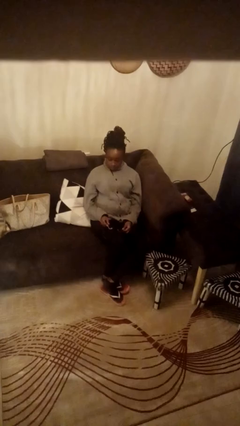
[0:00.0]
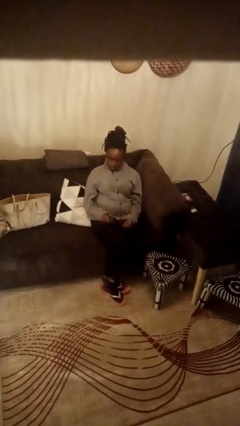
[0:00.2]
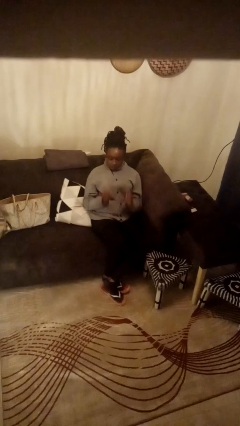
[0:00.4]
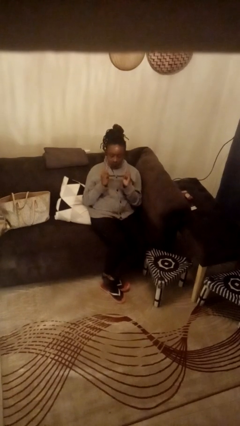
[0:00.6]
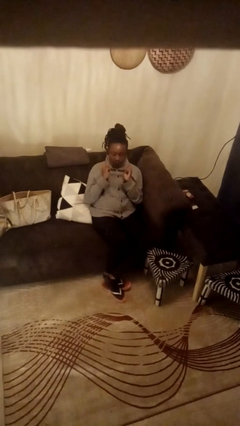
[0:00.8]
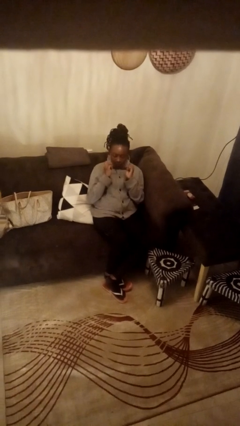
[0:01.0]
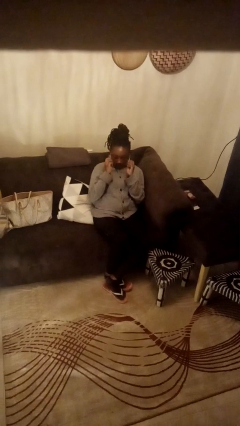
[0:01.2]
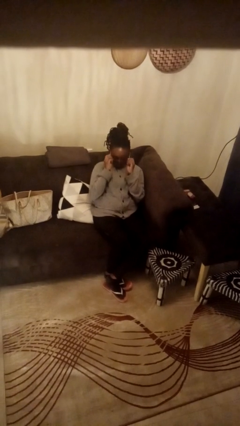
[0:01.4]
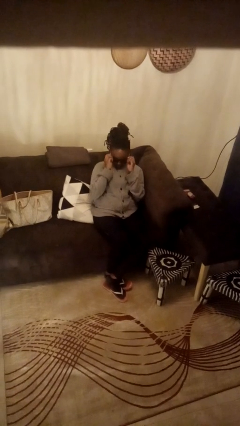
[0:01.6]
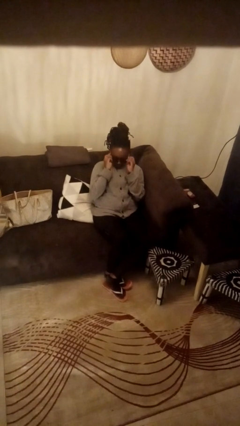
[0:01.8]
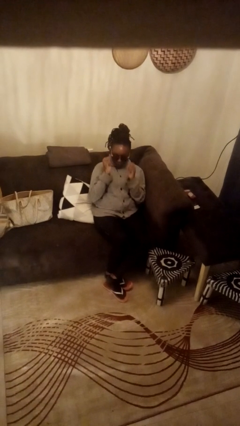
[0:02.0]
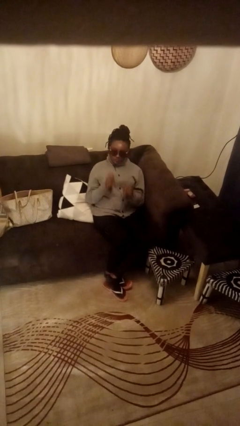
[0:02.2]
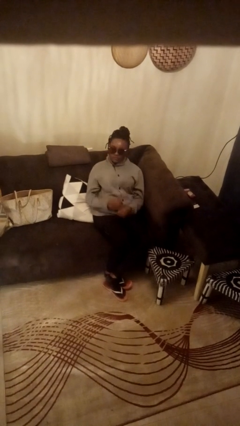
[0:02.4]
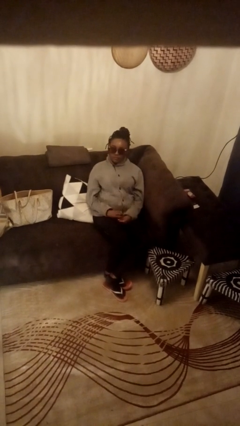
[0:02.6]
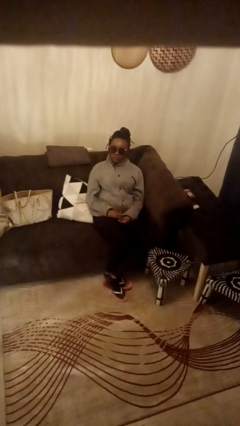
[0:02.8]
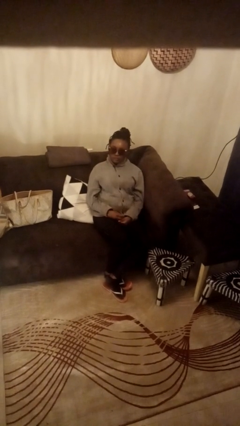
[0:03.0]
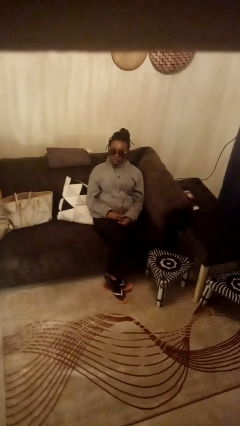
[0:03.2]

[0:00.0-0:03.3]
person puts on sunglasses

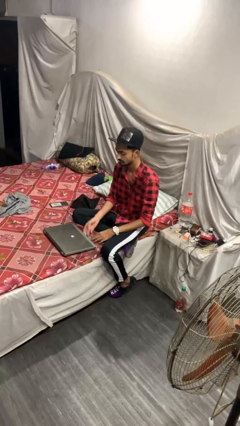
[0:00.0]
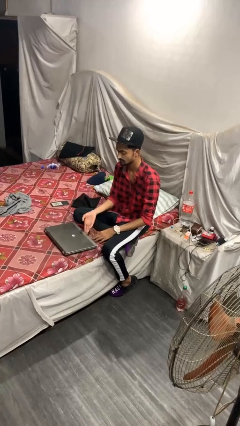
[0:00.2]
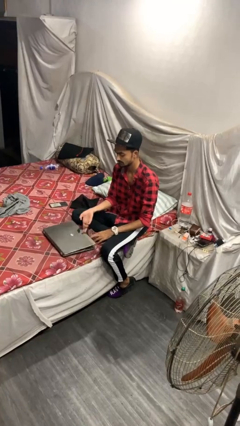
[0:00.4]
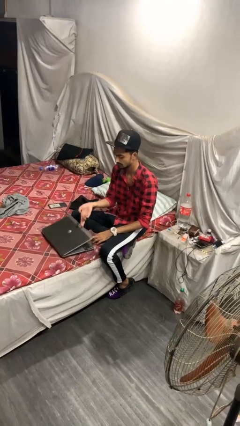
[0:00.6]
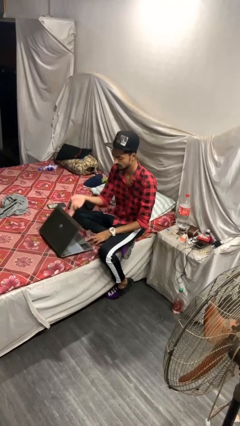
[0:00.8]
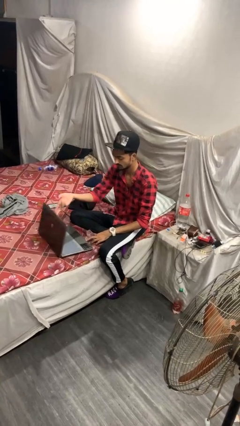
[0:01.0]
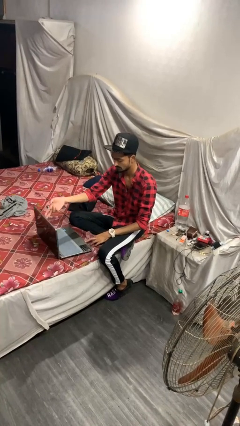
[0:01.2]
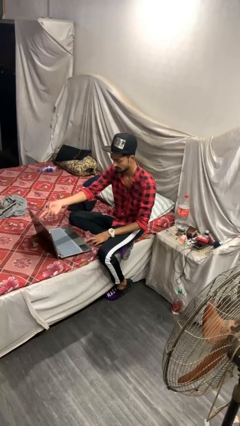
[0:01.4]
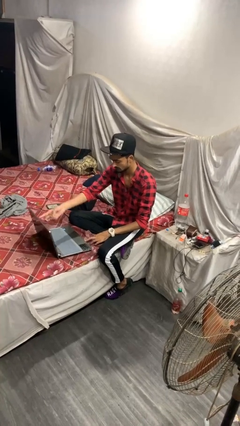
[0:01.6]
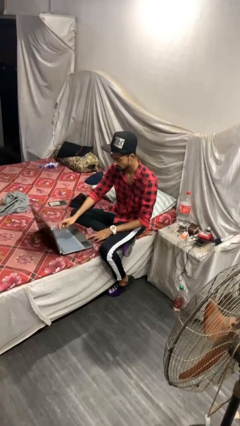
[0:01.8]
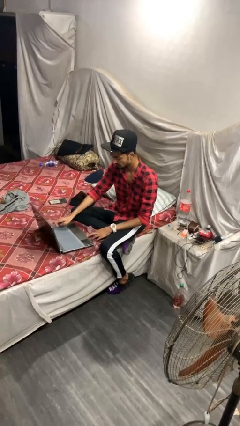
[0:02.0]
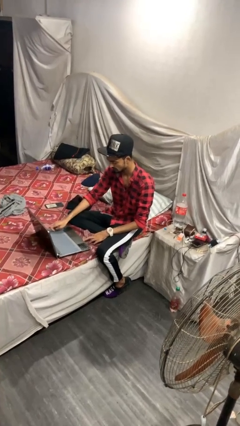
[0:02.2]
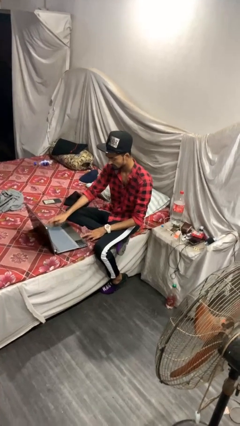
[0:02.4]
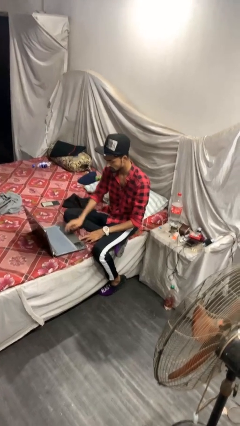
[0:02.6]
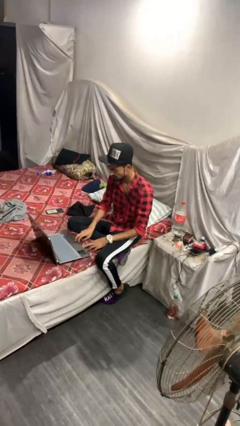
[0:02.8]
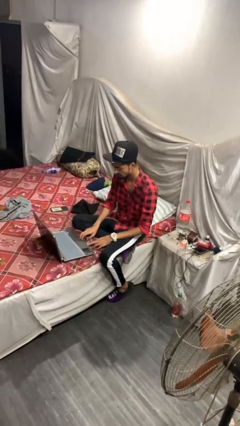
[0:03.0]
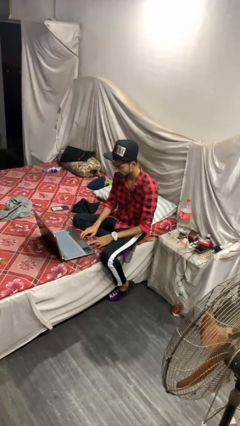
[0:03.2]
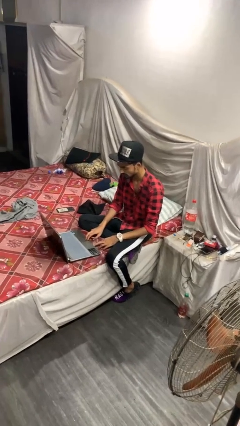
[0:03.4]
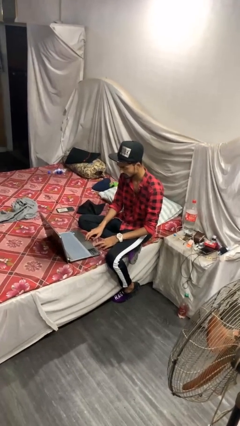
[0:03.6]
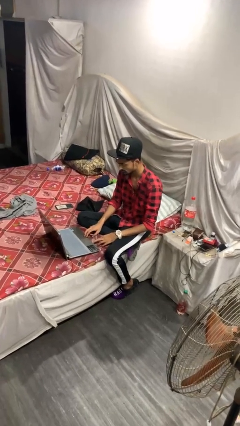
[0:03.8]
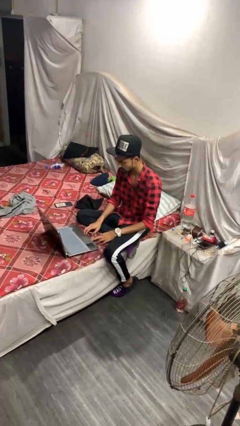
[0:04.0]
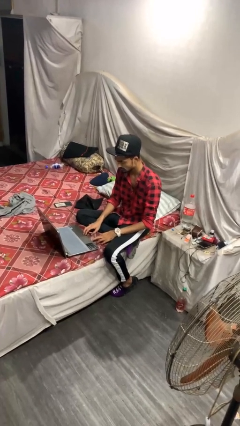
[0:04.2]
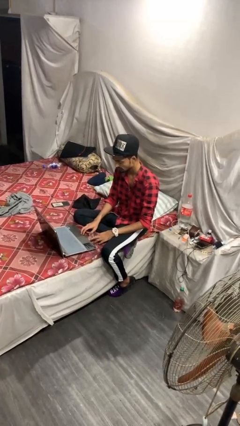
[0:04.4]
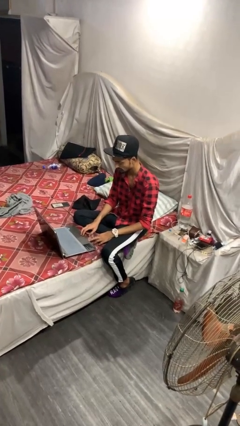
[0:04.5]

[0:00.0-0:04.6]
person opens laptop

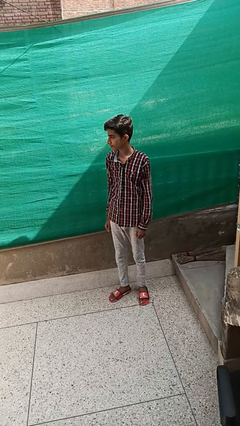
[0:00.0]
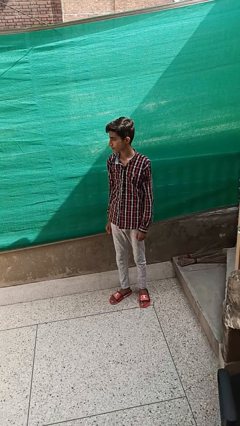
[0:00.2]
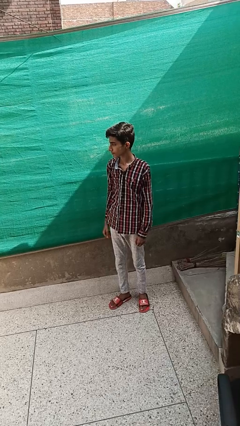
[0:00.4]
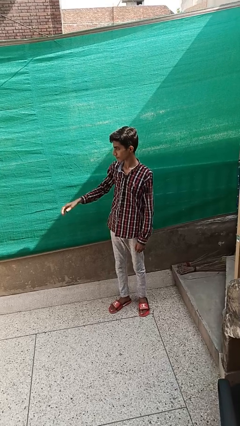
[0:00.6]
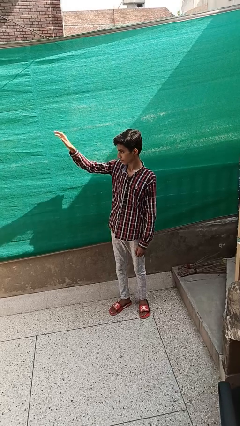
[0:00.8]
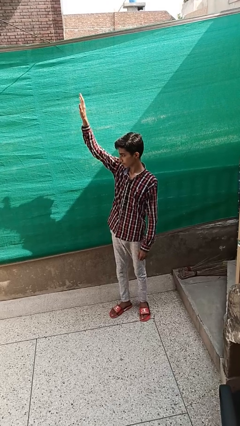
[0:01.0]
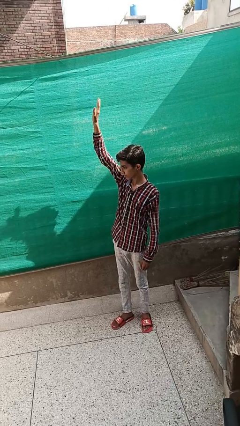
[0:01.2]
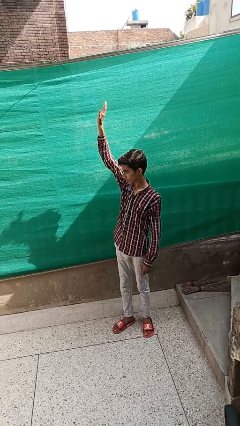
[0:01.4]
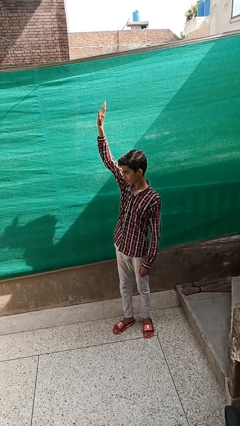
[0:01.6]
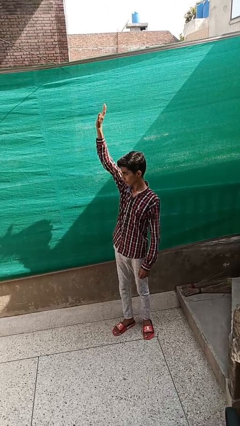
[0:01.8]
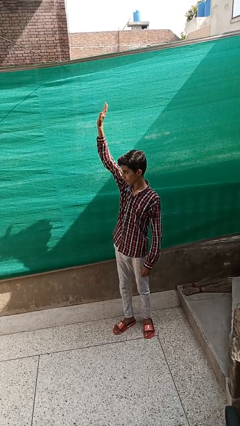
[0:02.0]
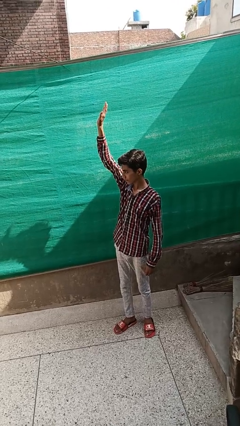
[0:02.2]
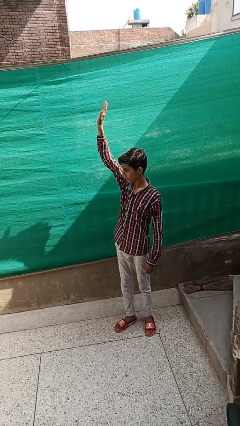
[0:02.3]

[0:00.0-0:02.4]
person gestures raise hand

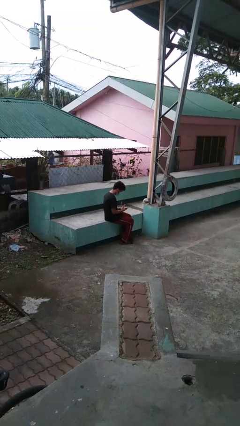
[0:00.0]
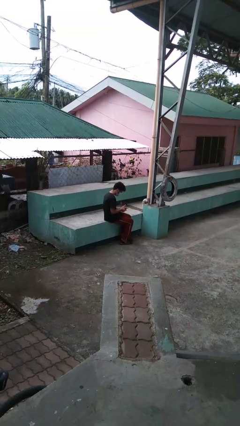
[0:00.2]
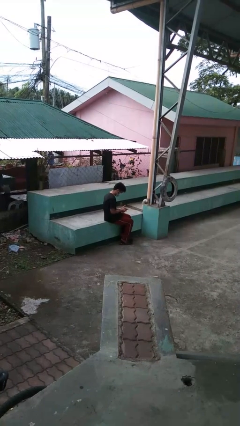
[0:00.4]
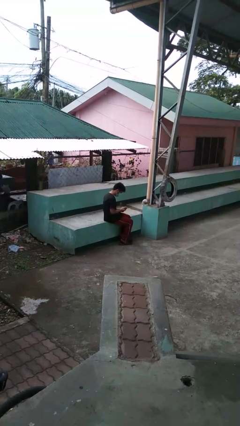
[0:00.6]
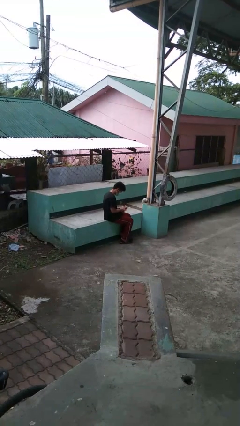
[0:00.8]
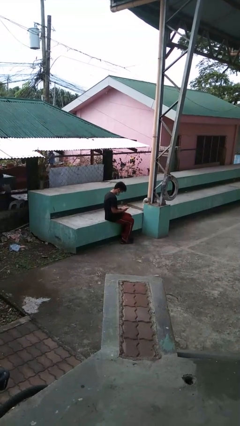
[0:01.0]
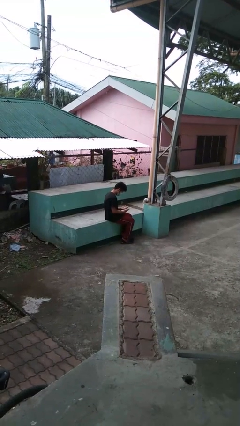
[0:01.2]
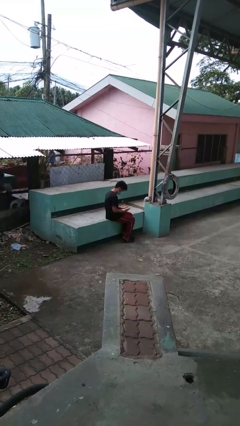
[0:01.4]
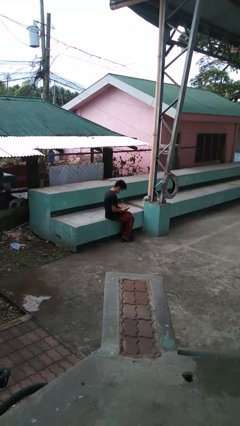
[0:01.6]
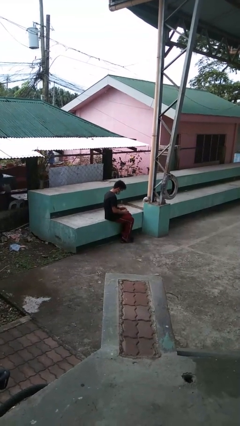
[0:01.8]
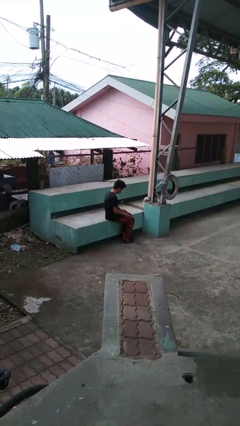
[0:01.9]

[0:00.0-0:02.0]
person looks at hands in lap

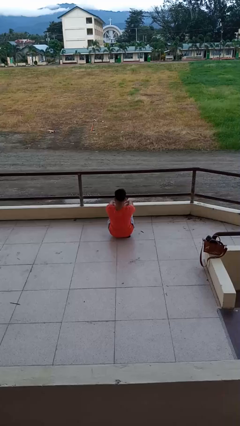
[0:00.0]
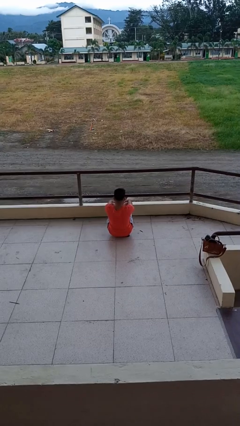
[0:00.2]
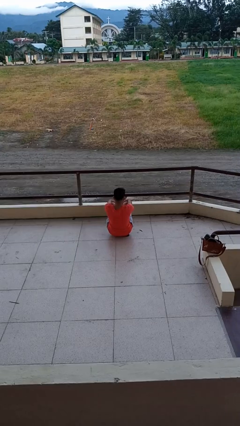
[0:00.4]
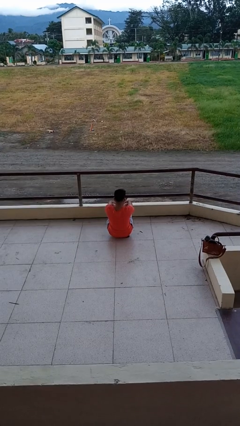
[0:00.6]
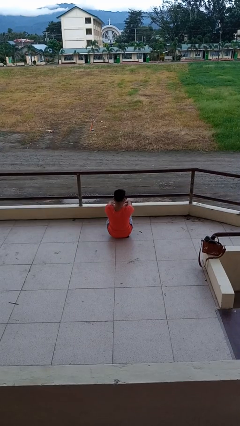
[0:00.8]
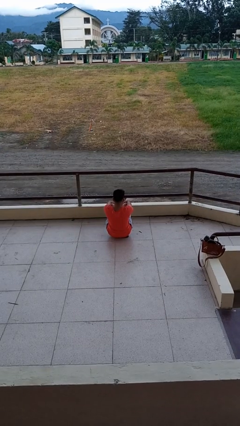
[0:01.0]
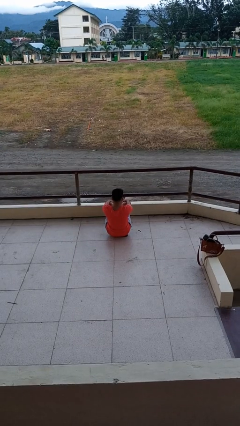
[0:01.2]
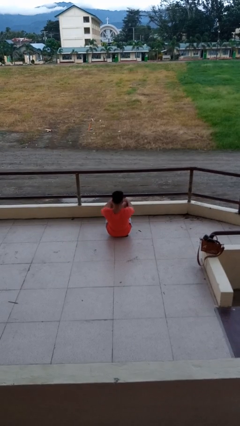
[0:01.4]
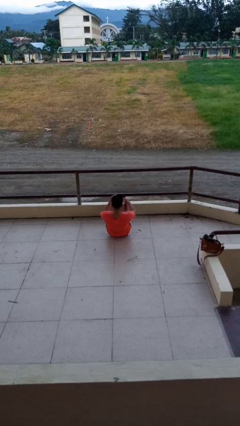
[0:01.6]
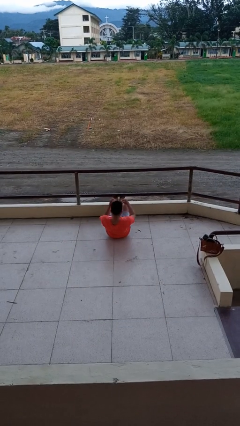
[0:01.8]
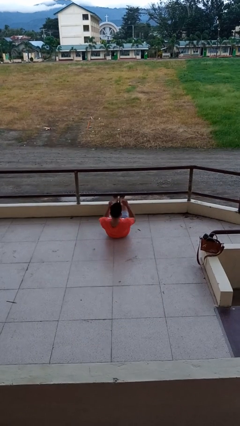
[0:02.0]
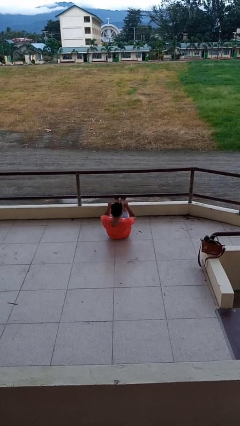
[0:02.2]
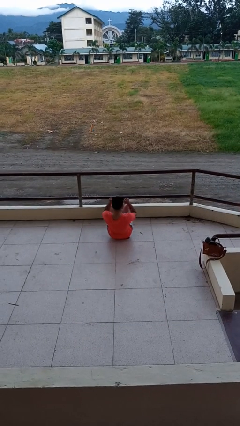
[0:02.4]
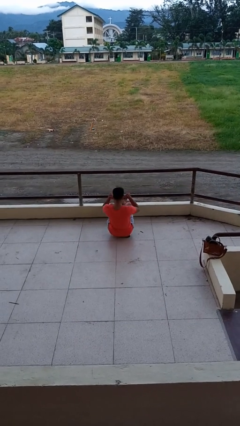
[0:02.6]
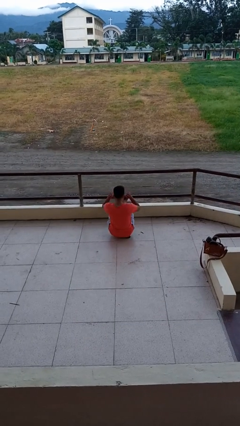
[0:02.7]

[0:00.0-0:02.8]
person exercises with situp

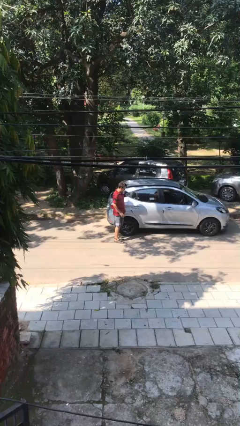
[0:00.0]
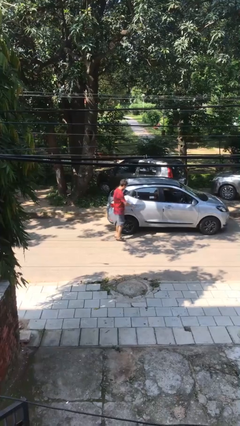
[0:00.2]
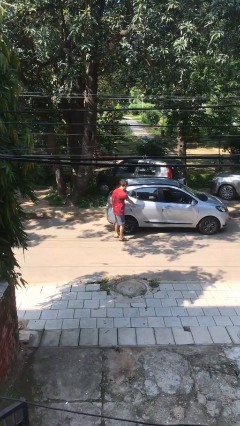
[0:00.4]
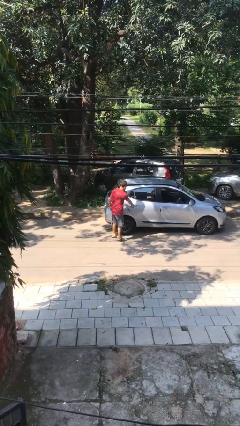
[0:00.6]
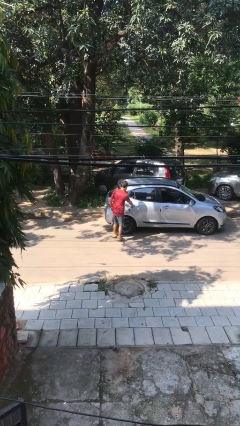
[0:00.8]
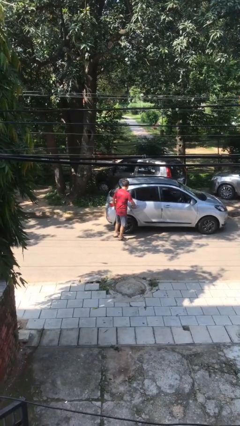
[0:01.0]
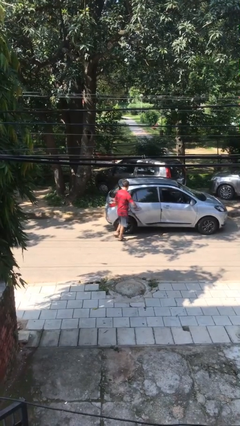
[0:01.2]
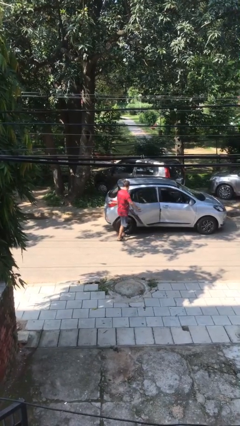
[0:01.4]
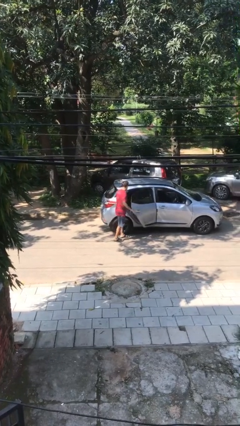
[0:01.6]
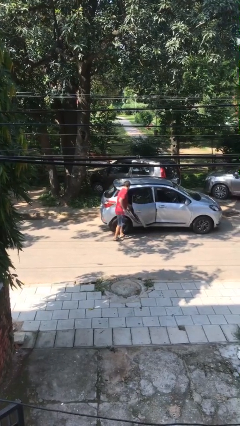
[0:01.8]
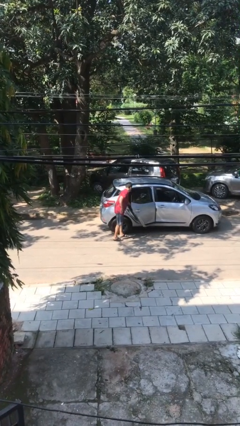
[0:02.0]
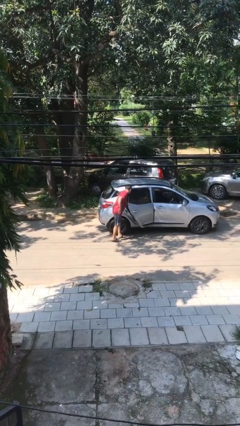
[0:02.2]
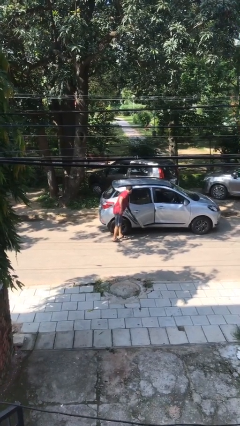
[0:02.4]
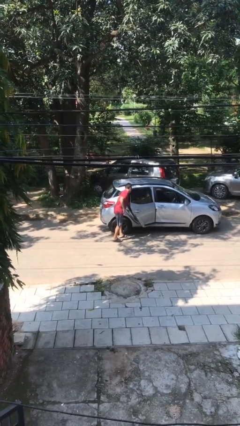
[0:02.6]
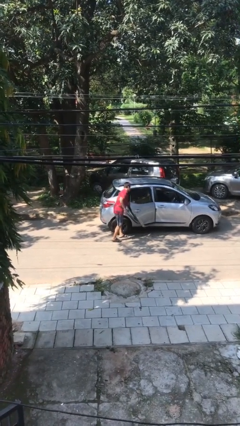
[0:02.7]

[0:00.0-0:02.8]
person opens car door
